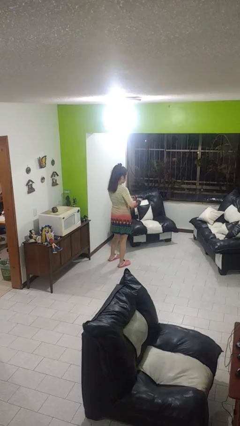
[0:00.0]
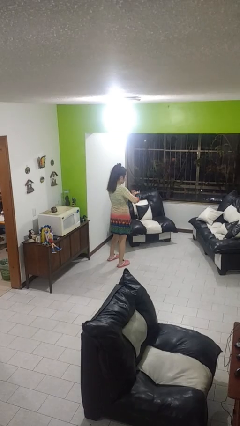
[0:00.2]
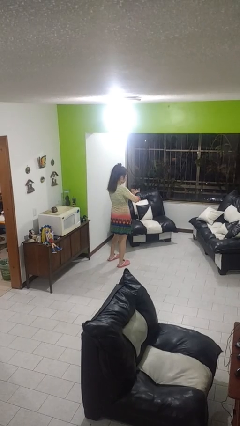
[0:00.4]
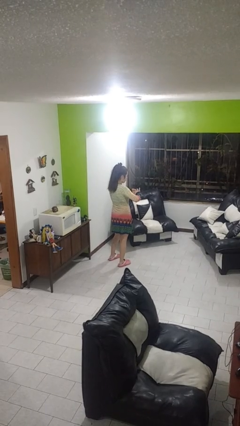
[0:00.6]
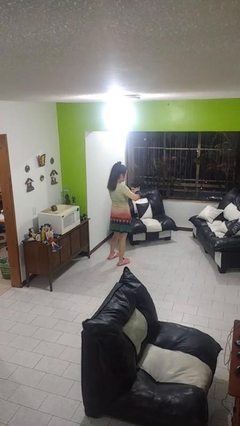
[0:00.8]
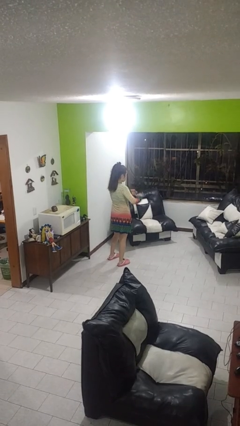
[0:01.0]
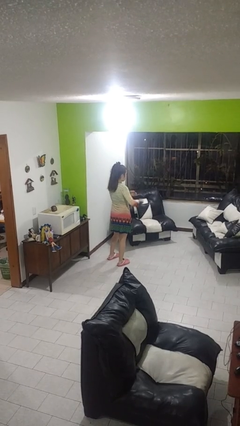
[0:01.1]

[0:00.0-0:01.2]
person clips fingernails

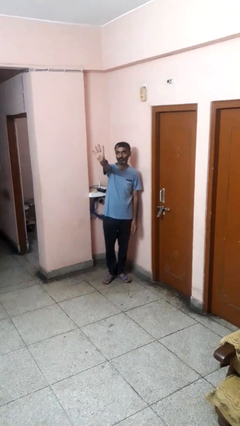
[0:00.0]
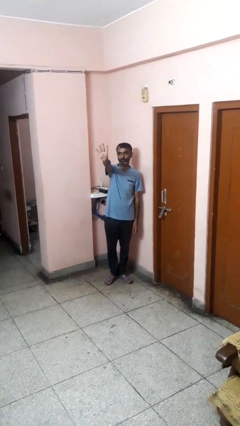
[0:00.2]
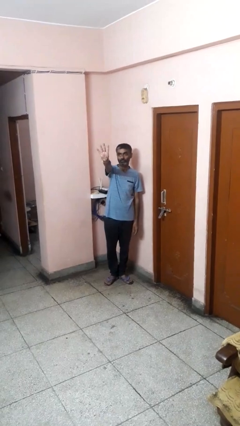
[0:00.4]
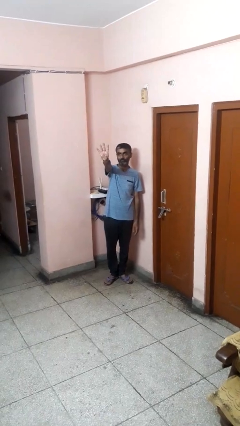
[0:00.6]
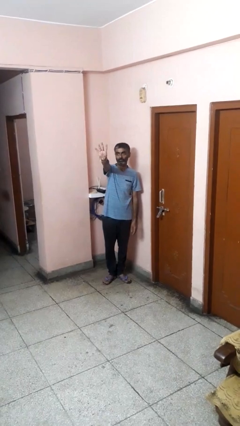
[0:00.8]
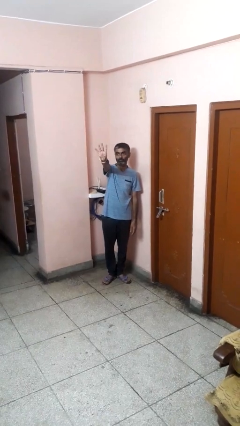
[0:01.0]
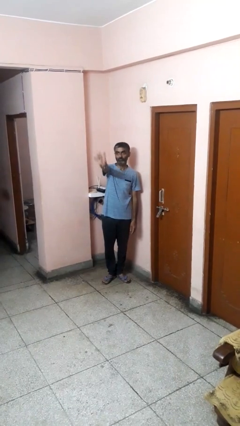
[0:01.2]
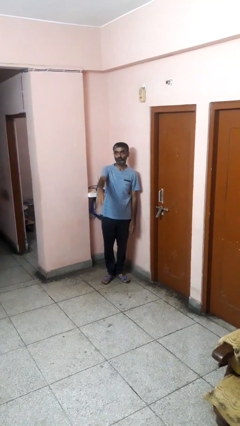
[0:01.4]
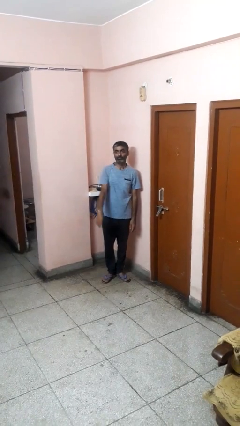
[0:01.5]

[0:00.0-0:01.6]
person gestures number four

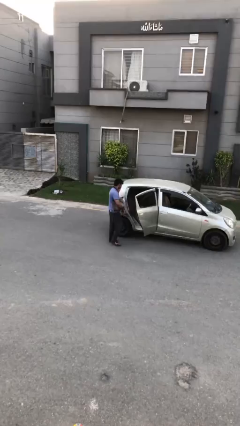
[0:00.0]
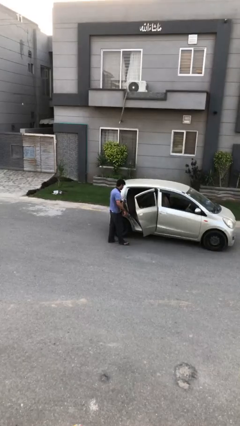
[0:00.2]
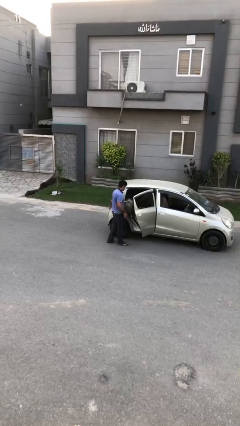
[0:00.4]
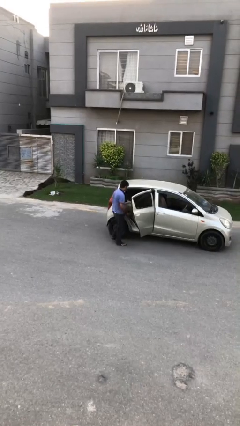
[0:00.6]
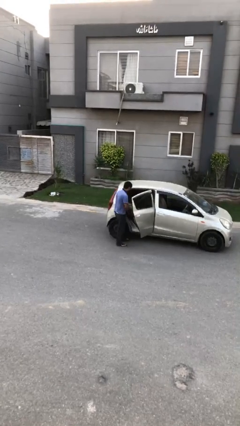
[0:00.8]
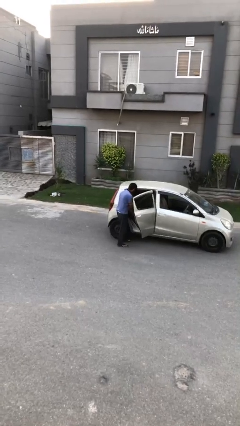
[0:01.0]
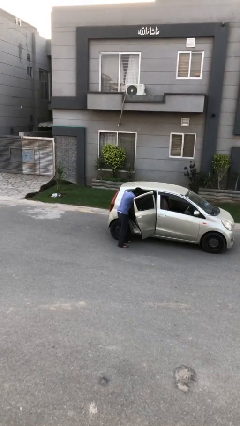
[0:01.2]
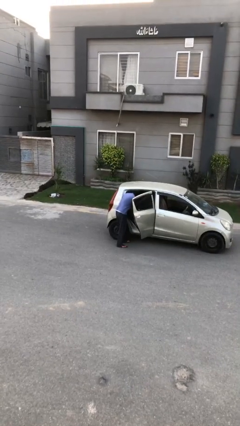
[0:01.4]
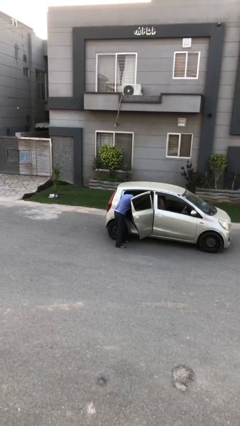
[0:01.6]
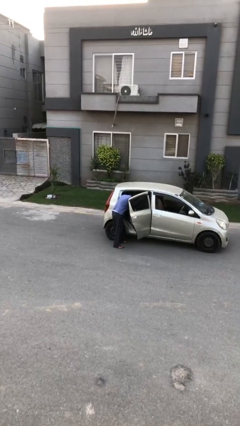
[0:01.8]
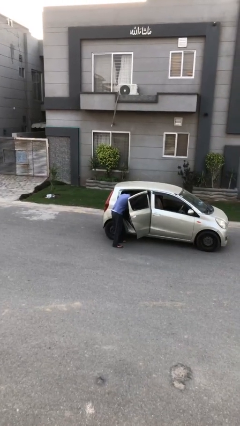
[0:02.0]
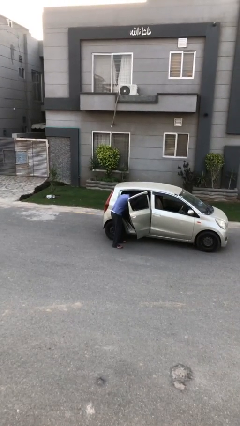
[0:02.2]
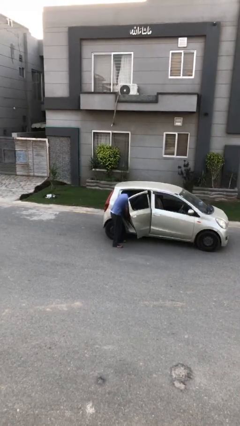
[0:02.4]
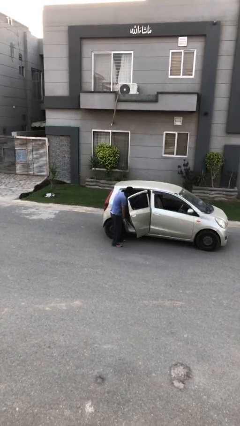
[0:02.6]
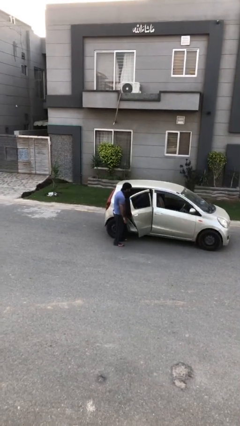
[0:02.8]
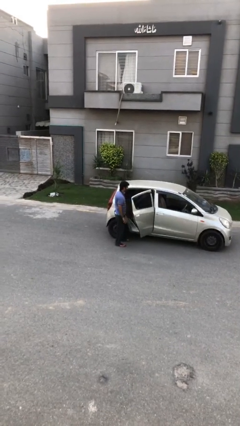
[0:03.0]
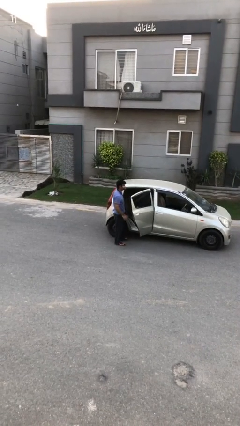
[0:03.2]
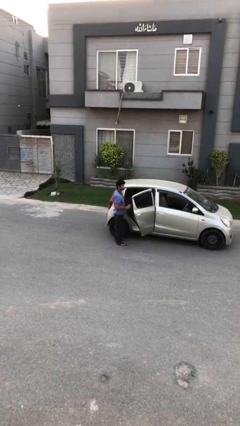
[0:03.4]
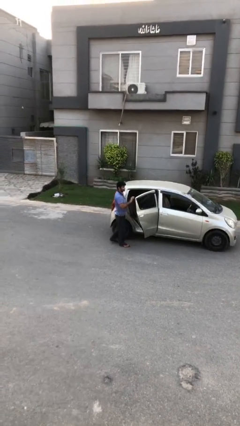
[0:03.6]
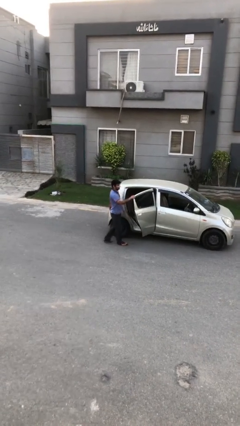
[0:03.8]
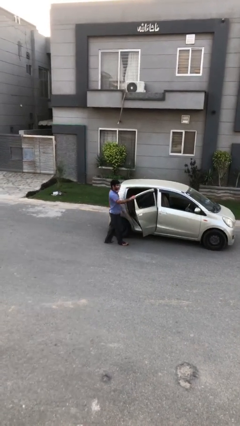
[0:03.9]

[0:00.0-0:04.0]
person loads car

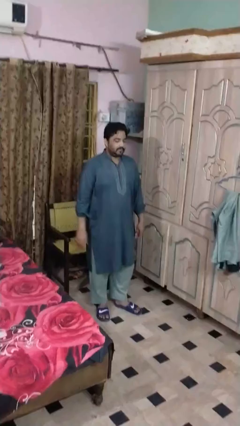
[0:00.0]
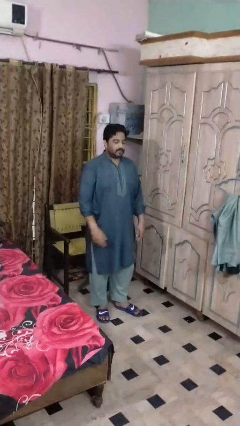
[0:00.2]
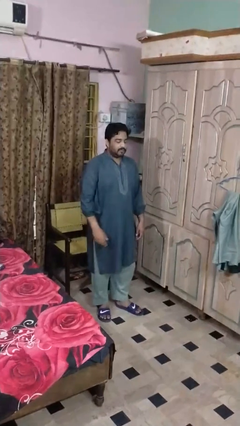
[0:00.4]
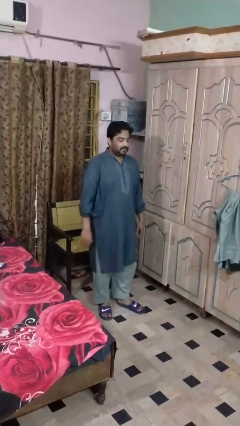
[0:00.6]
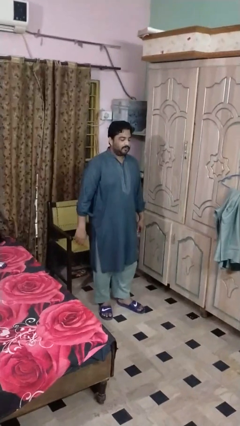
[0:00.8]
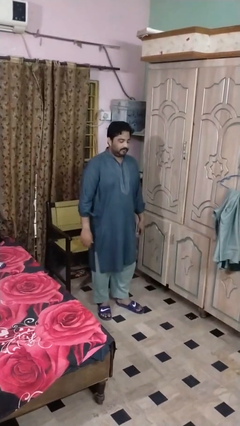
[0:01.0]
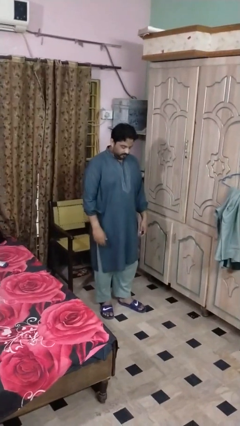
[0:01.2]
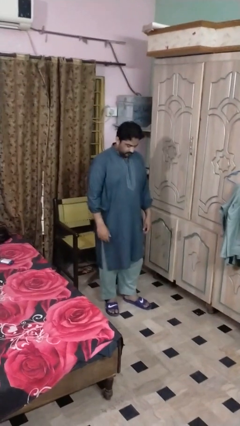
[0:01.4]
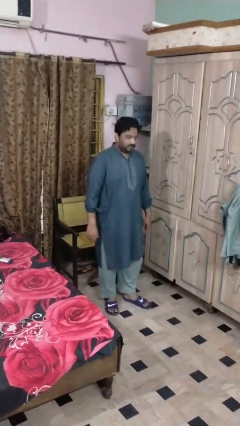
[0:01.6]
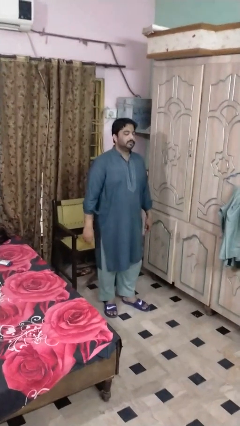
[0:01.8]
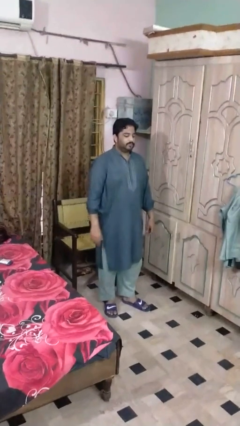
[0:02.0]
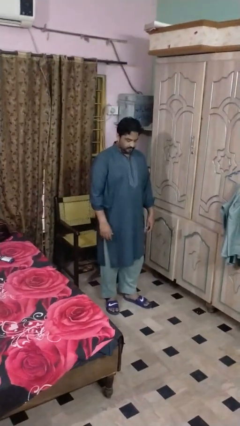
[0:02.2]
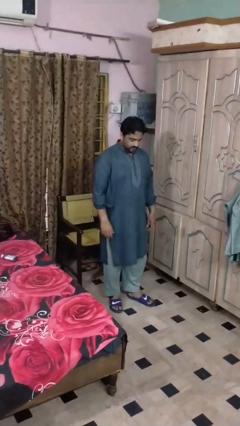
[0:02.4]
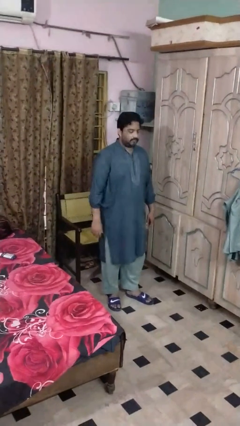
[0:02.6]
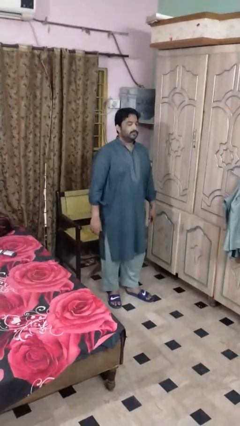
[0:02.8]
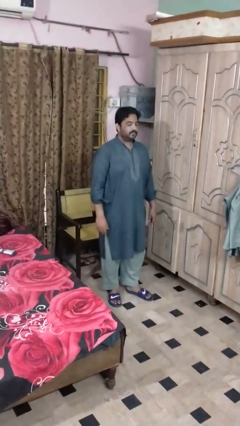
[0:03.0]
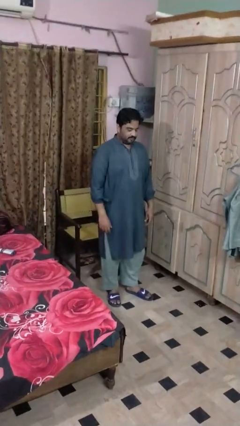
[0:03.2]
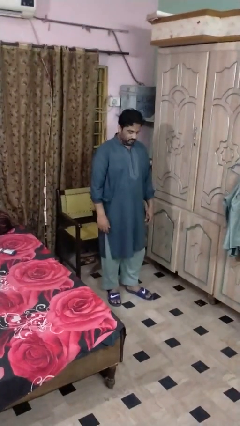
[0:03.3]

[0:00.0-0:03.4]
person nods head

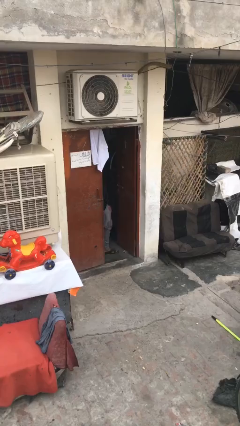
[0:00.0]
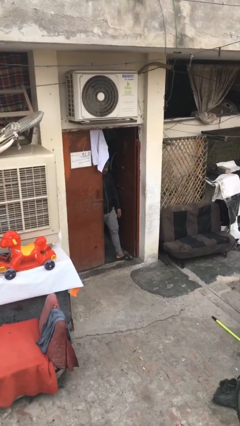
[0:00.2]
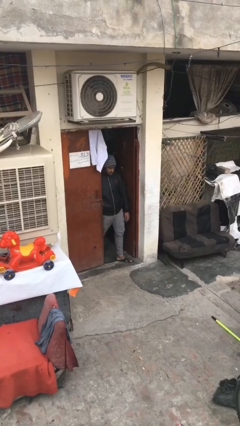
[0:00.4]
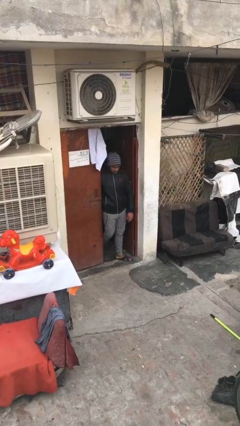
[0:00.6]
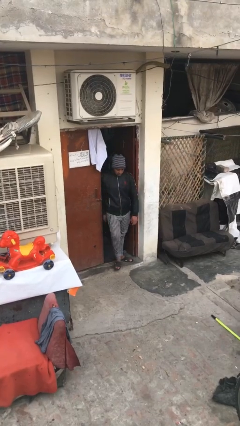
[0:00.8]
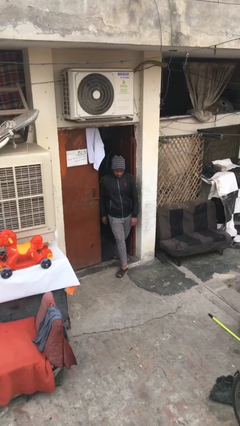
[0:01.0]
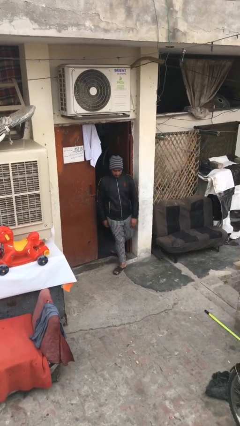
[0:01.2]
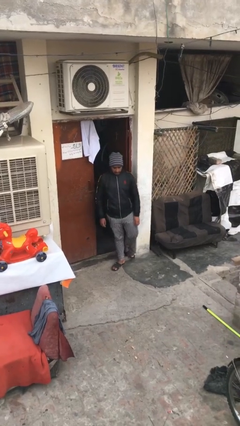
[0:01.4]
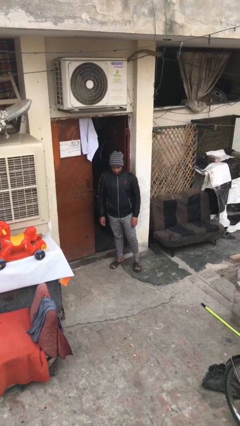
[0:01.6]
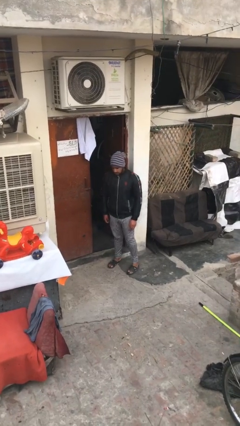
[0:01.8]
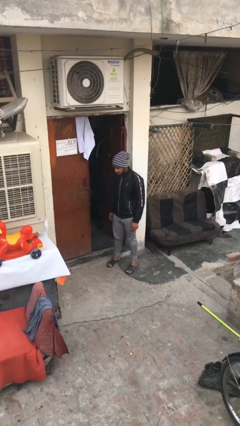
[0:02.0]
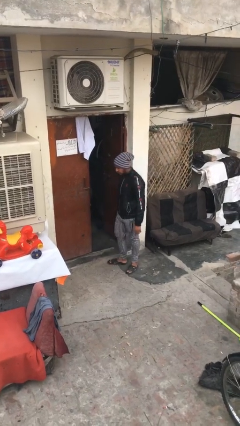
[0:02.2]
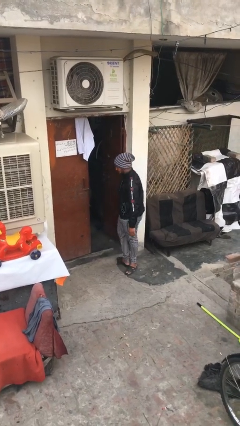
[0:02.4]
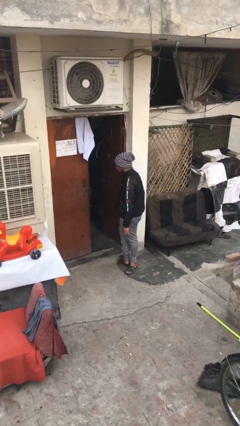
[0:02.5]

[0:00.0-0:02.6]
person enters scene through structure

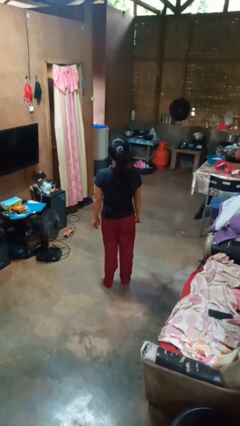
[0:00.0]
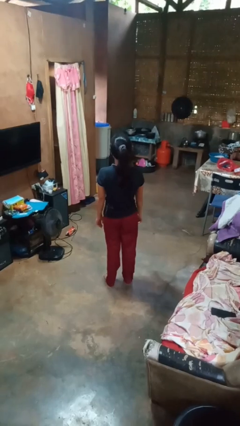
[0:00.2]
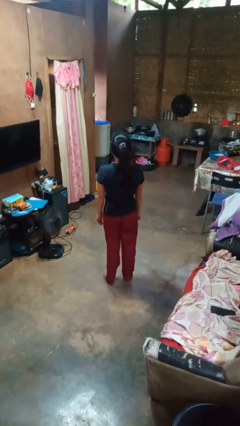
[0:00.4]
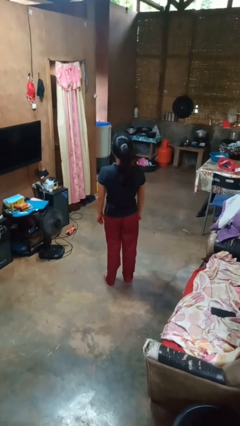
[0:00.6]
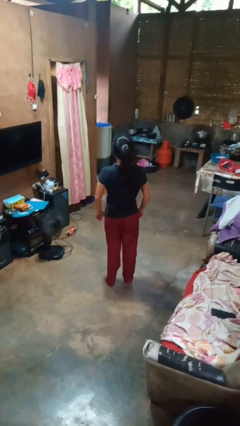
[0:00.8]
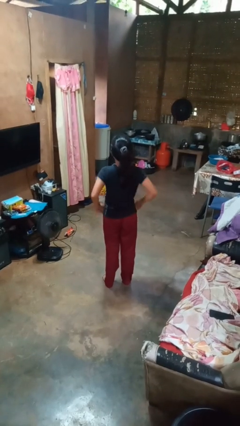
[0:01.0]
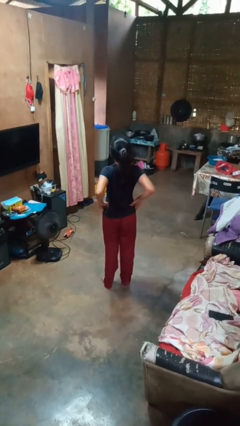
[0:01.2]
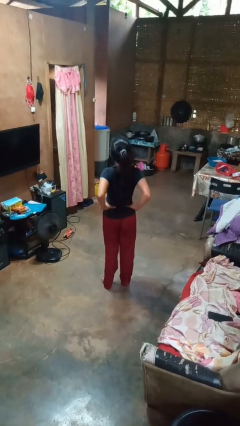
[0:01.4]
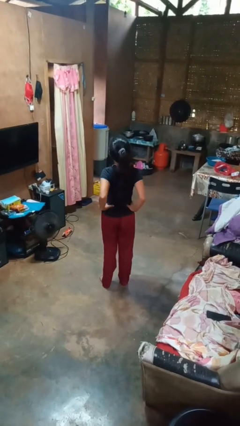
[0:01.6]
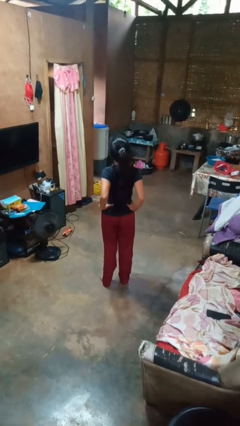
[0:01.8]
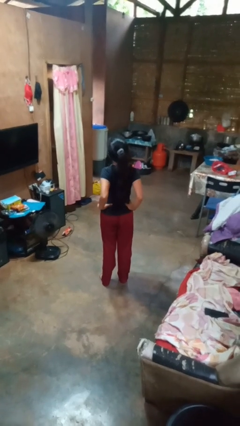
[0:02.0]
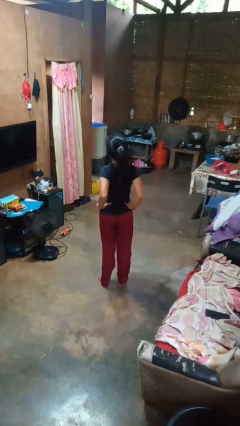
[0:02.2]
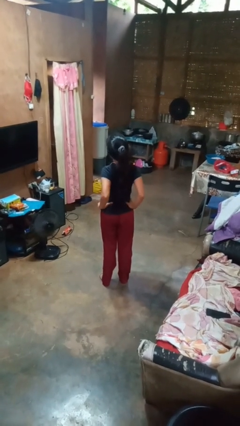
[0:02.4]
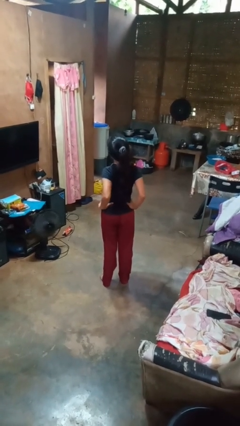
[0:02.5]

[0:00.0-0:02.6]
person stretches back

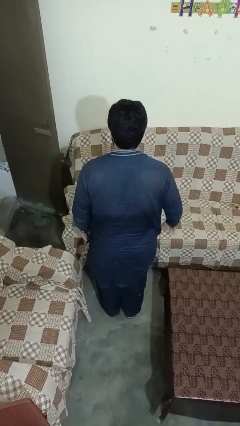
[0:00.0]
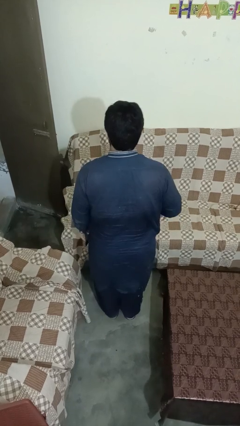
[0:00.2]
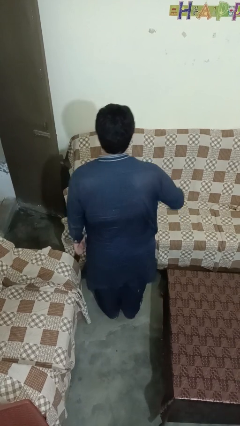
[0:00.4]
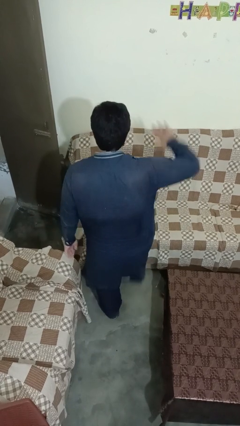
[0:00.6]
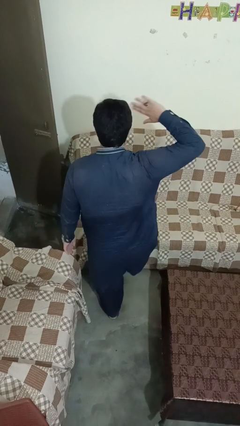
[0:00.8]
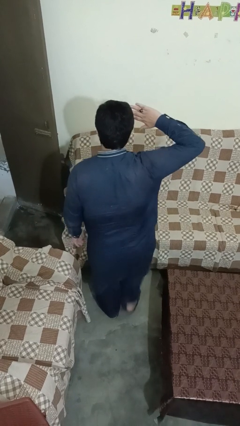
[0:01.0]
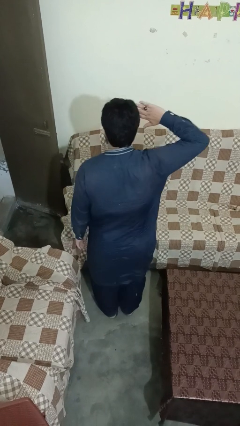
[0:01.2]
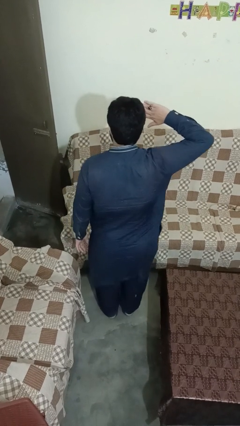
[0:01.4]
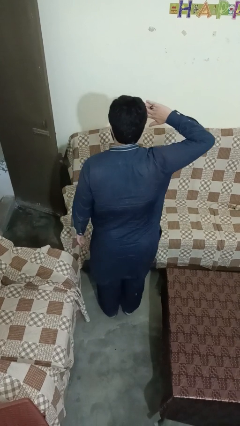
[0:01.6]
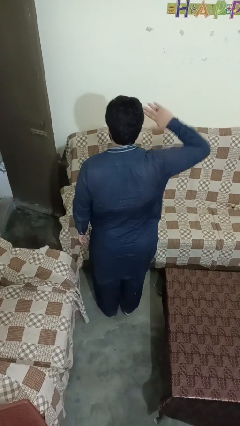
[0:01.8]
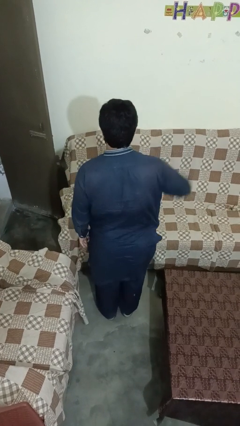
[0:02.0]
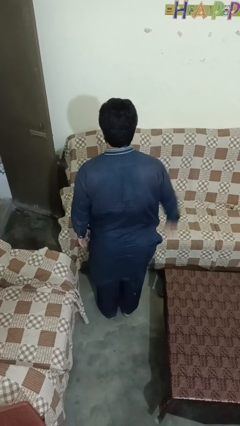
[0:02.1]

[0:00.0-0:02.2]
person salutes
